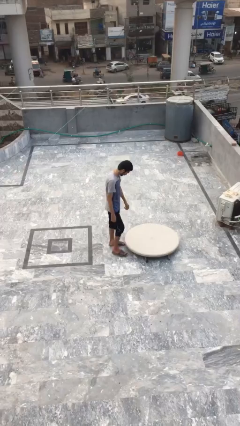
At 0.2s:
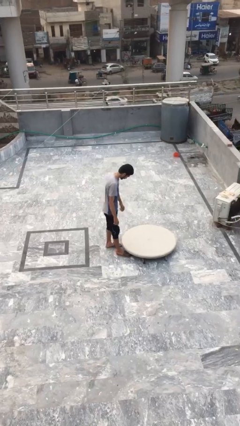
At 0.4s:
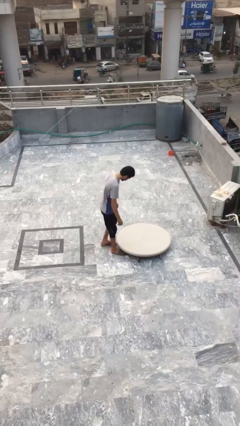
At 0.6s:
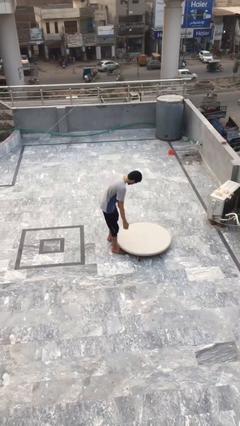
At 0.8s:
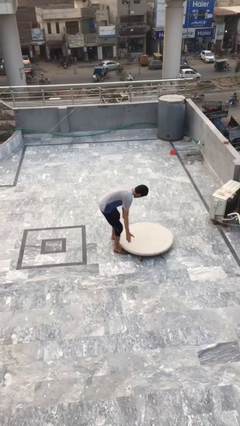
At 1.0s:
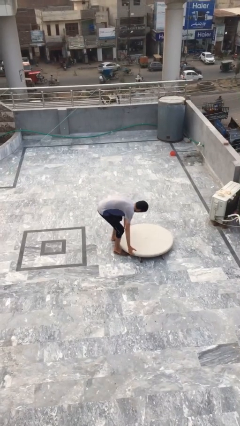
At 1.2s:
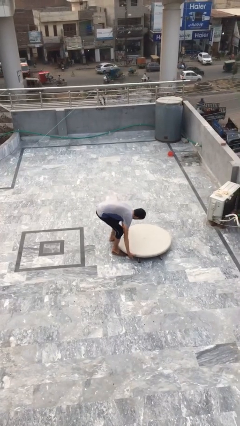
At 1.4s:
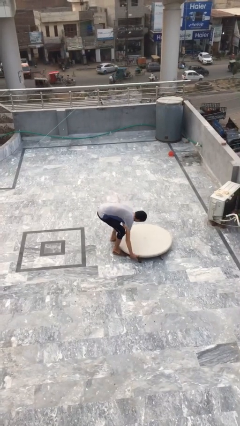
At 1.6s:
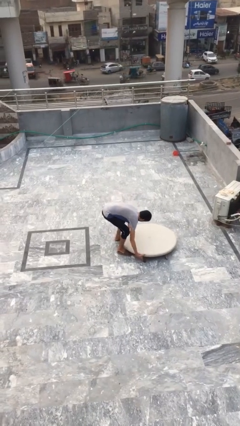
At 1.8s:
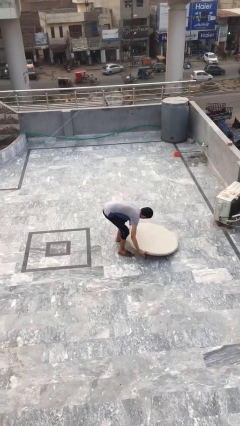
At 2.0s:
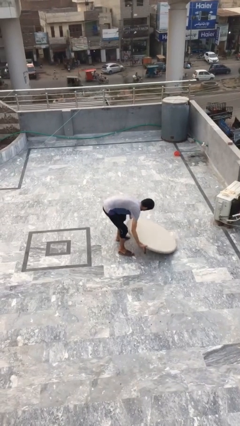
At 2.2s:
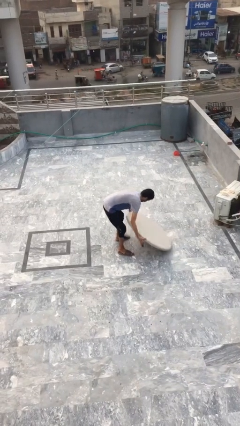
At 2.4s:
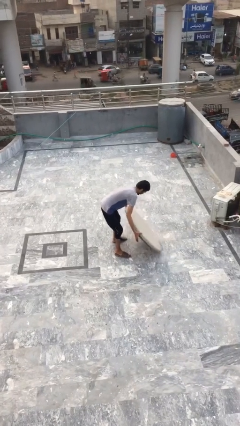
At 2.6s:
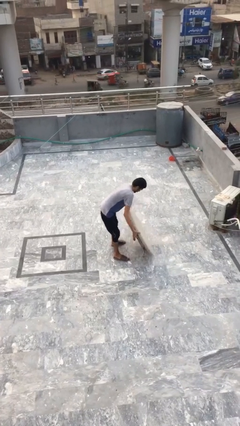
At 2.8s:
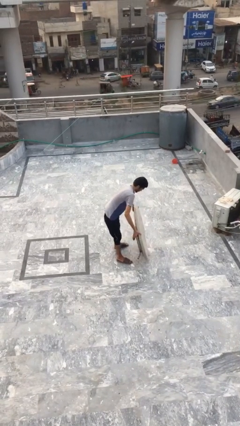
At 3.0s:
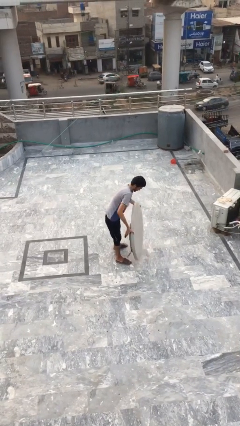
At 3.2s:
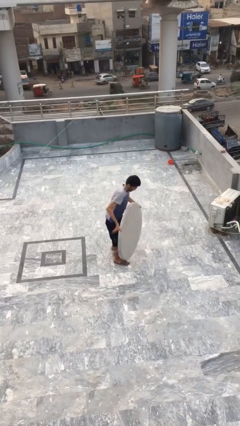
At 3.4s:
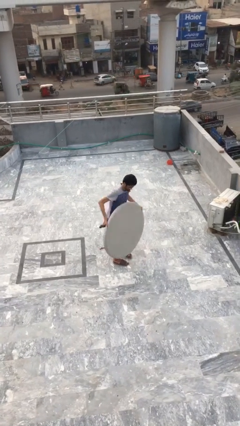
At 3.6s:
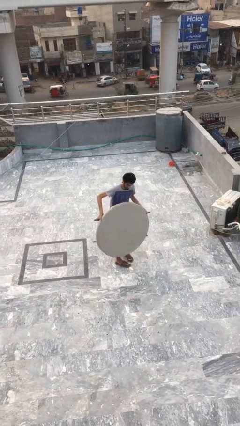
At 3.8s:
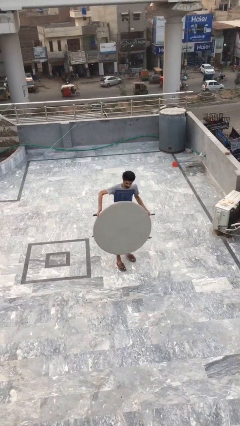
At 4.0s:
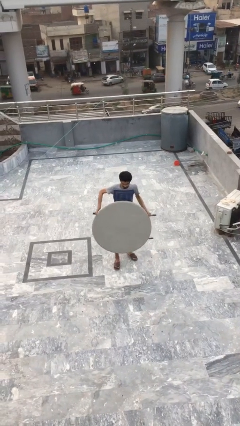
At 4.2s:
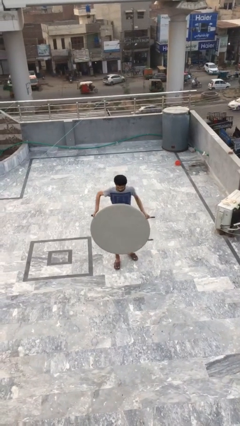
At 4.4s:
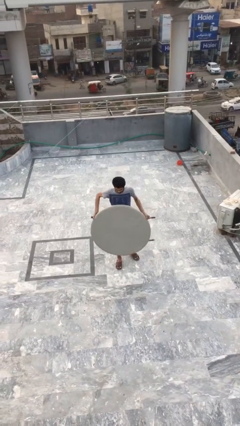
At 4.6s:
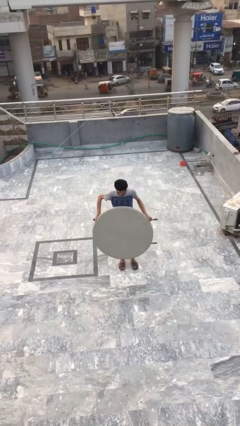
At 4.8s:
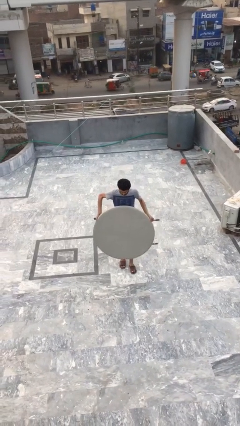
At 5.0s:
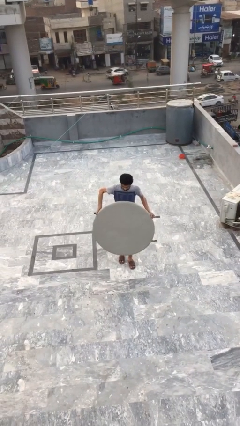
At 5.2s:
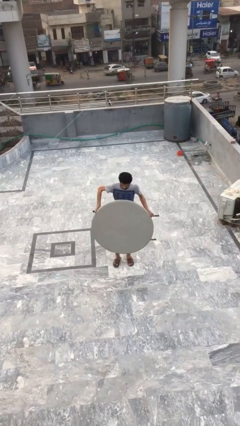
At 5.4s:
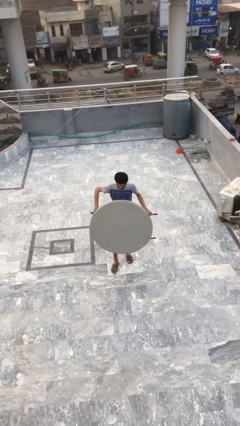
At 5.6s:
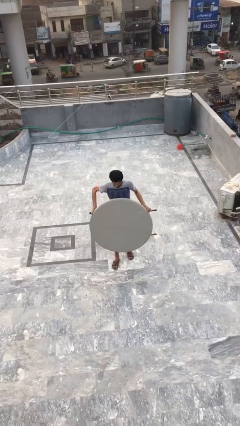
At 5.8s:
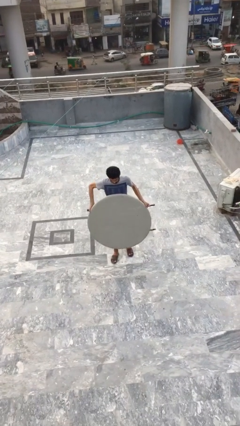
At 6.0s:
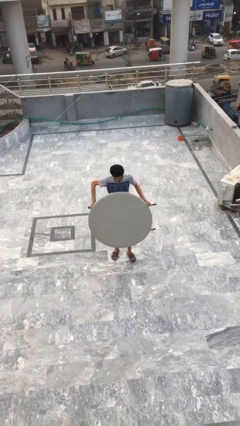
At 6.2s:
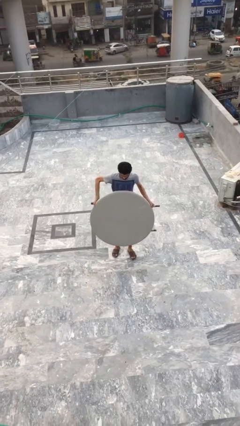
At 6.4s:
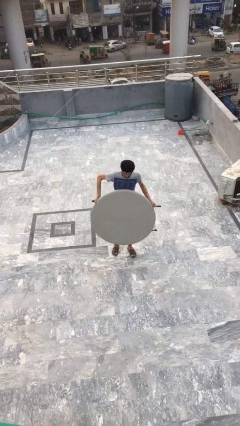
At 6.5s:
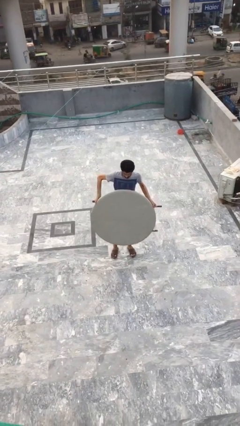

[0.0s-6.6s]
person carries heavy object

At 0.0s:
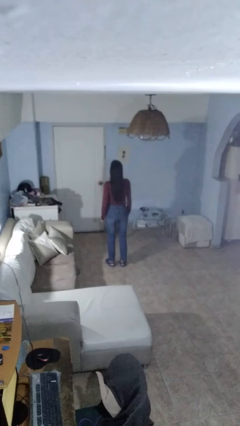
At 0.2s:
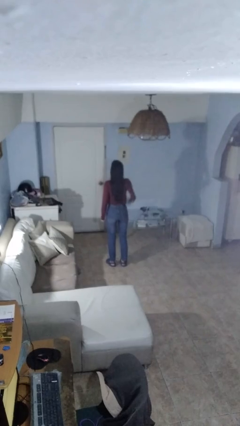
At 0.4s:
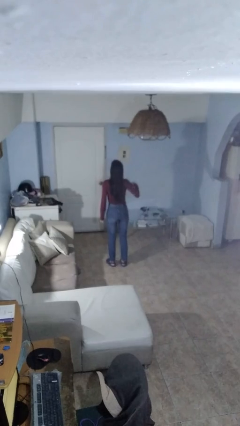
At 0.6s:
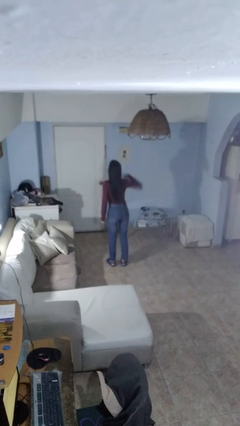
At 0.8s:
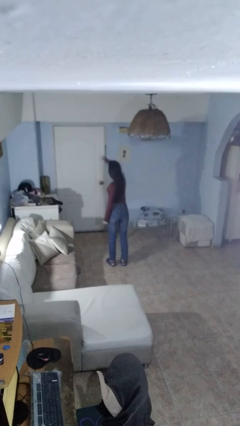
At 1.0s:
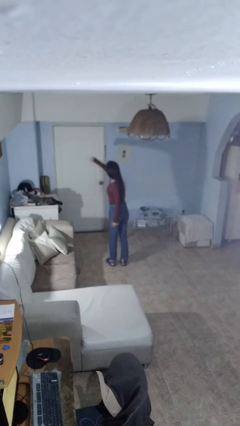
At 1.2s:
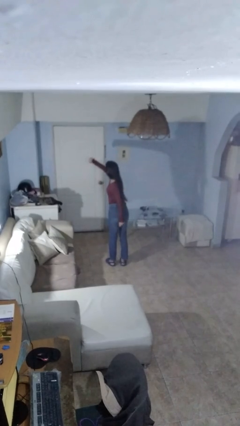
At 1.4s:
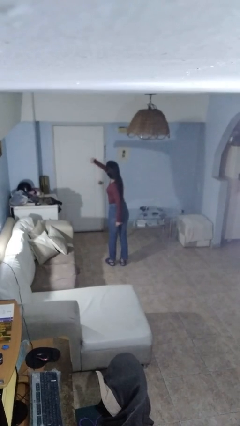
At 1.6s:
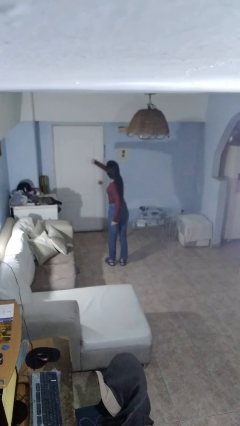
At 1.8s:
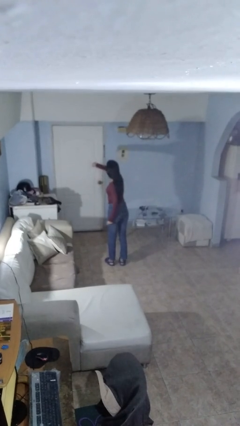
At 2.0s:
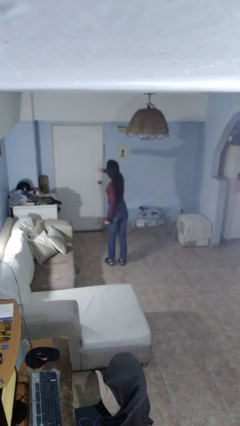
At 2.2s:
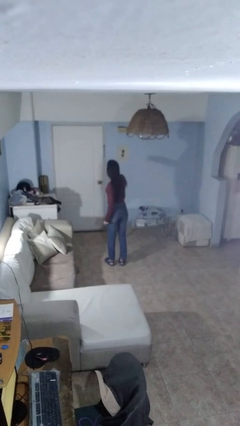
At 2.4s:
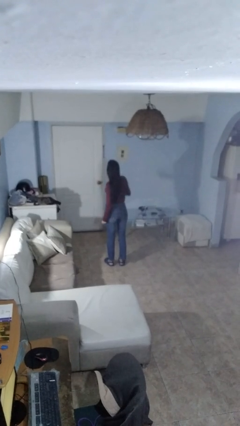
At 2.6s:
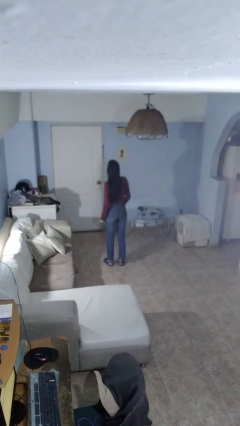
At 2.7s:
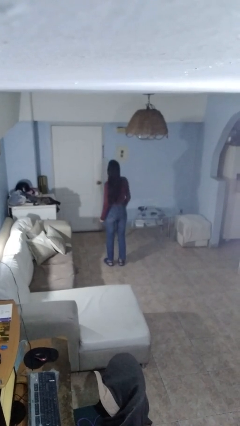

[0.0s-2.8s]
person punches

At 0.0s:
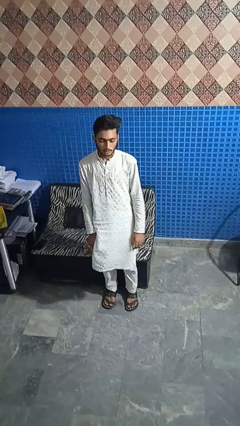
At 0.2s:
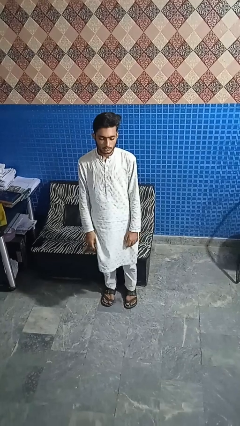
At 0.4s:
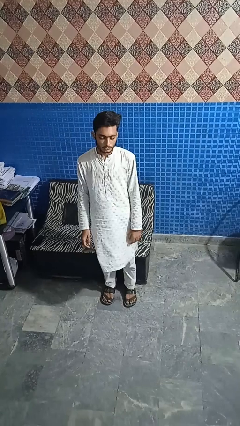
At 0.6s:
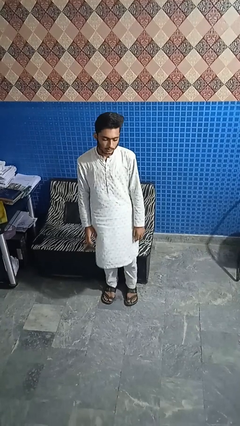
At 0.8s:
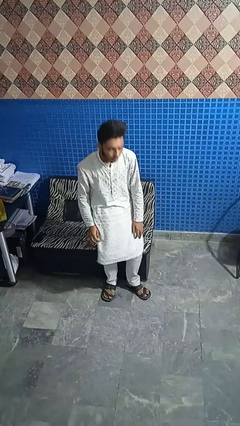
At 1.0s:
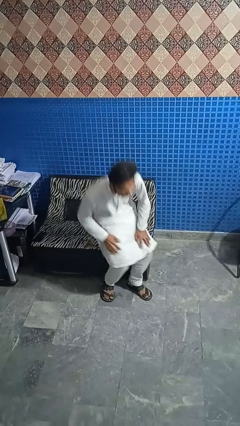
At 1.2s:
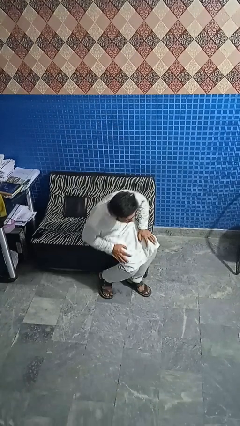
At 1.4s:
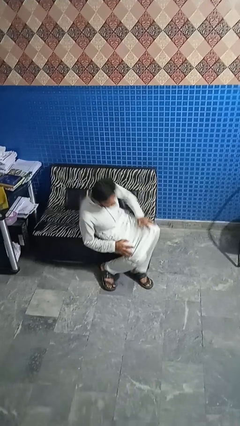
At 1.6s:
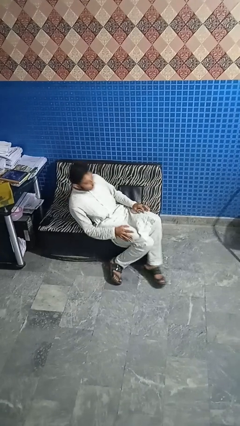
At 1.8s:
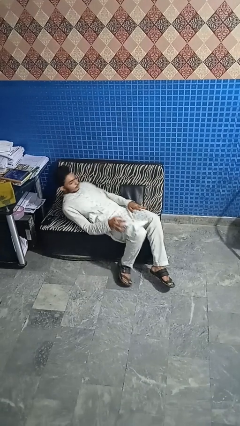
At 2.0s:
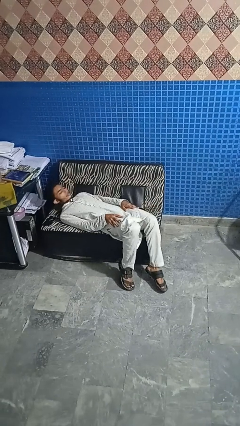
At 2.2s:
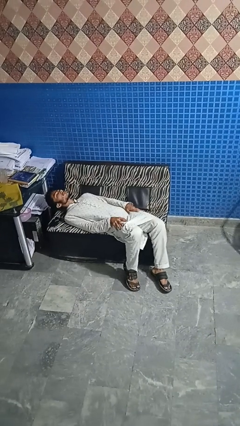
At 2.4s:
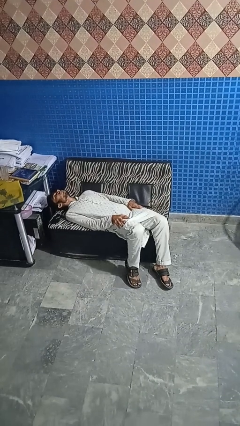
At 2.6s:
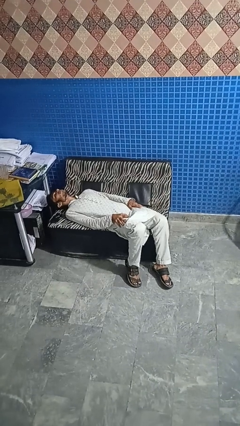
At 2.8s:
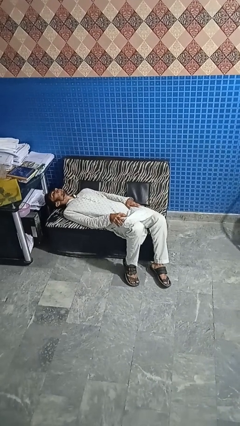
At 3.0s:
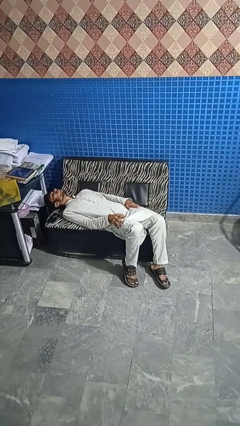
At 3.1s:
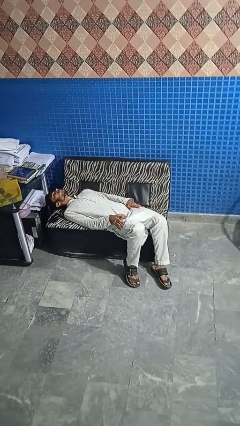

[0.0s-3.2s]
person lies down on couch

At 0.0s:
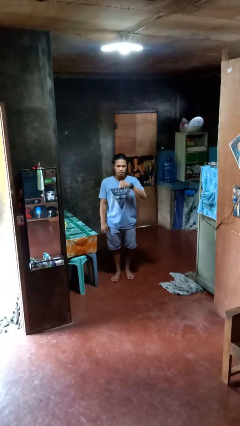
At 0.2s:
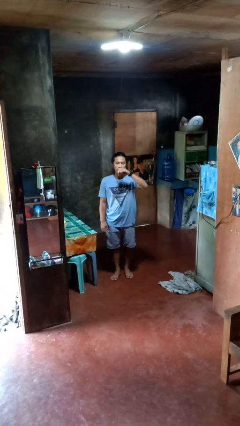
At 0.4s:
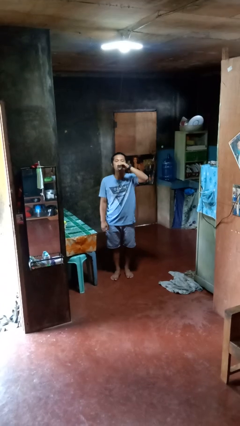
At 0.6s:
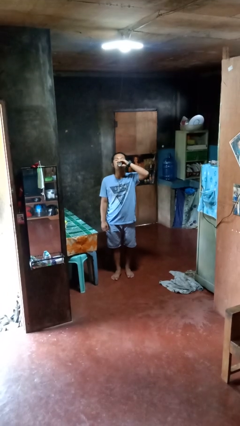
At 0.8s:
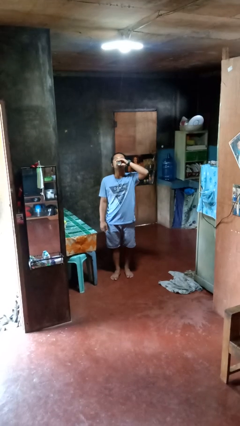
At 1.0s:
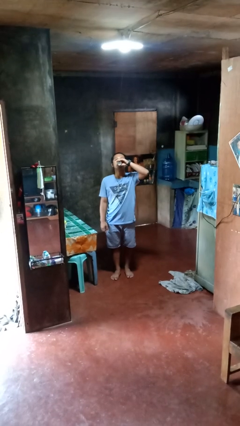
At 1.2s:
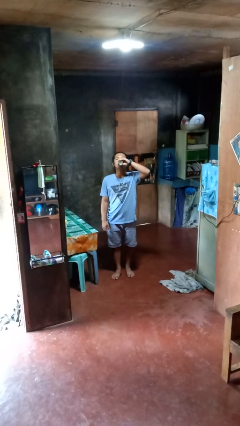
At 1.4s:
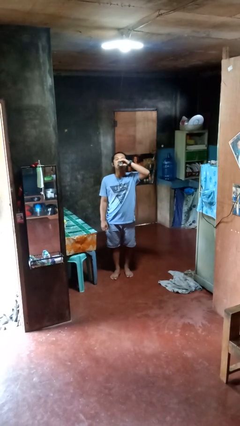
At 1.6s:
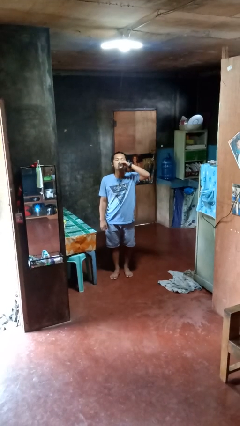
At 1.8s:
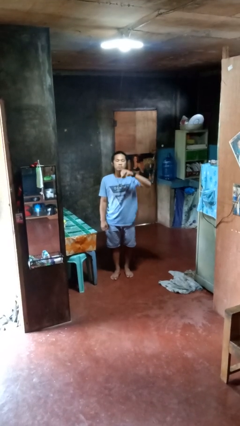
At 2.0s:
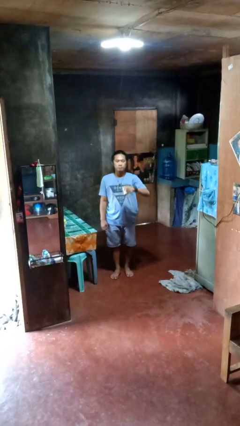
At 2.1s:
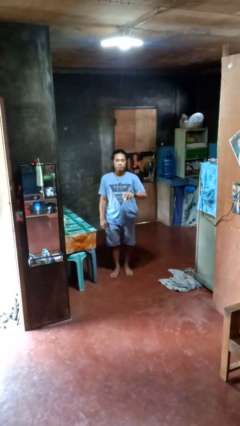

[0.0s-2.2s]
person drinks from beverage can

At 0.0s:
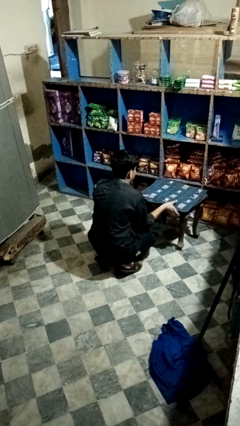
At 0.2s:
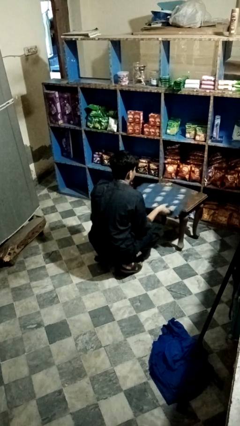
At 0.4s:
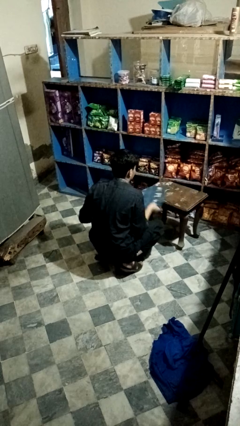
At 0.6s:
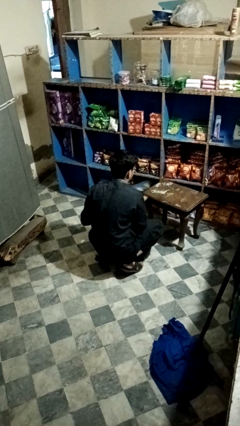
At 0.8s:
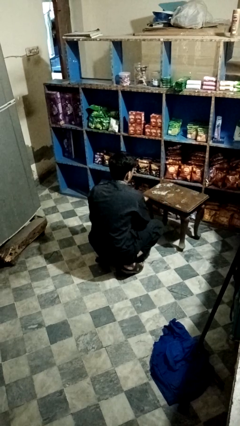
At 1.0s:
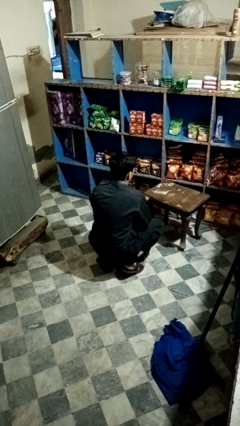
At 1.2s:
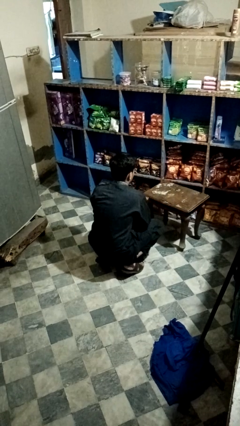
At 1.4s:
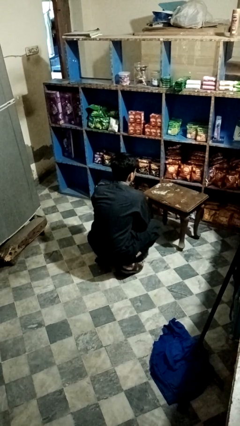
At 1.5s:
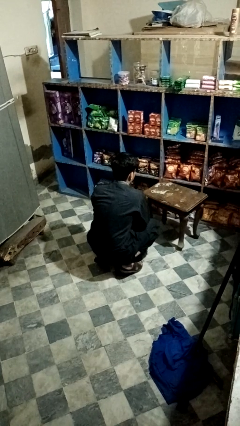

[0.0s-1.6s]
person folds tablecloth

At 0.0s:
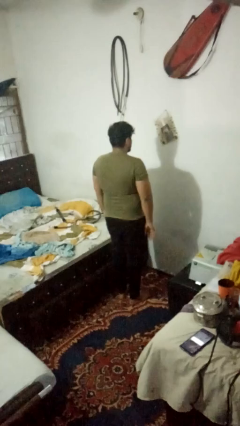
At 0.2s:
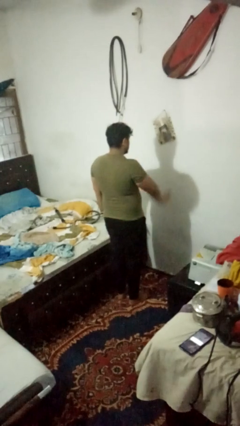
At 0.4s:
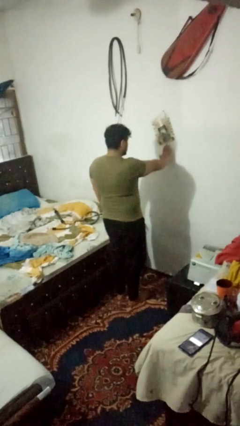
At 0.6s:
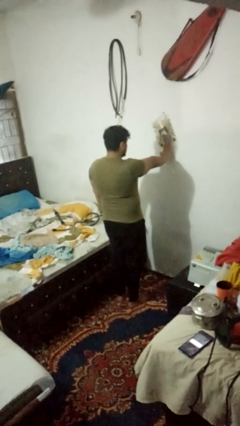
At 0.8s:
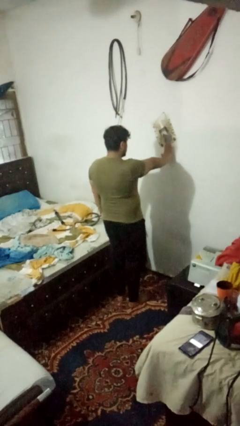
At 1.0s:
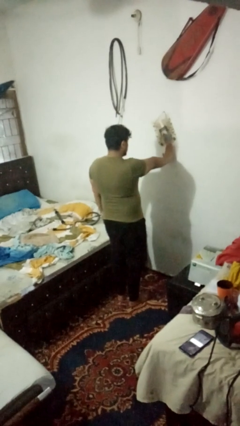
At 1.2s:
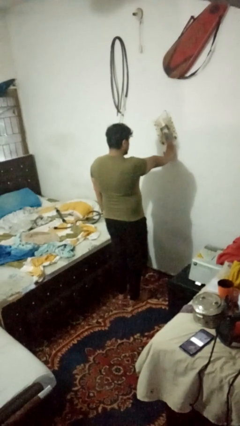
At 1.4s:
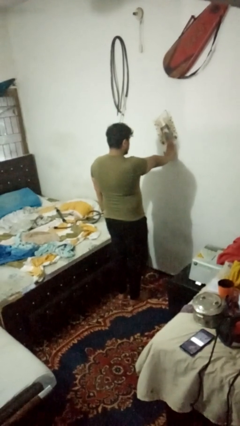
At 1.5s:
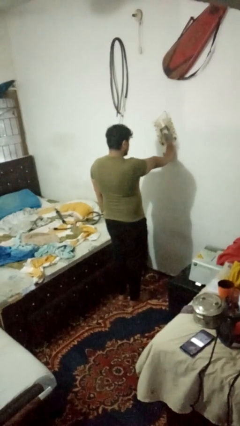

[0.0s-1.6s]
person gestures stop
